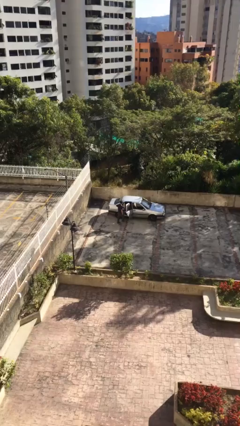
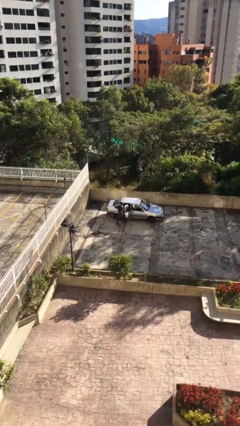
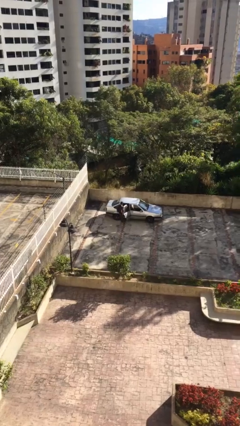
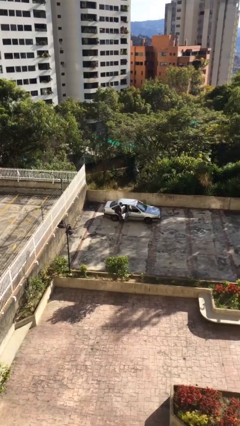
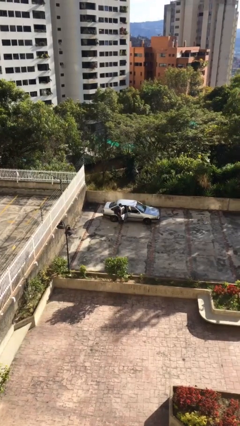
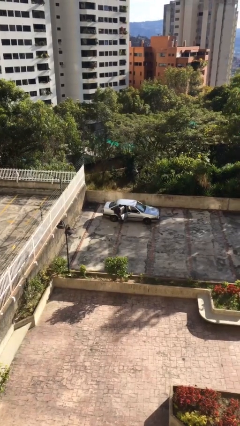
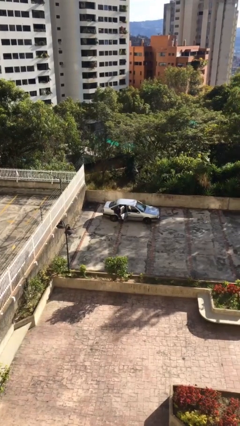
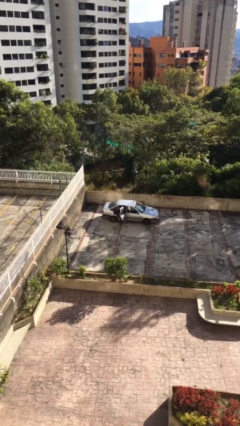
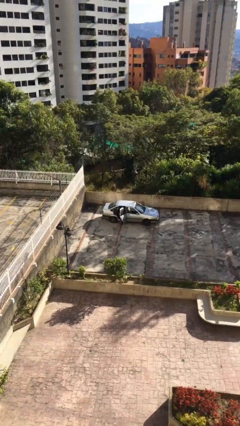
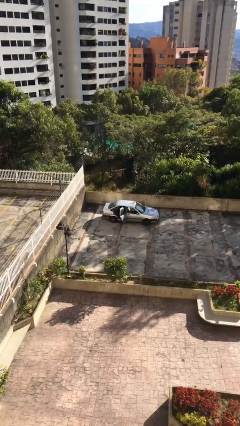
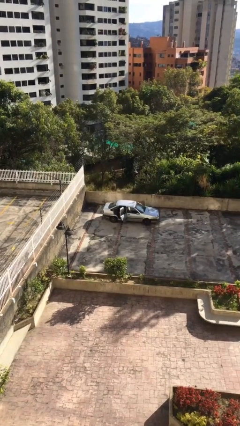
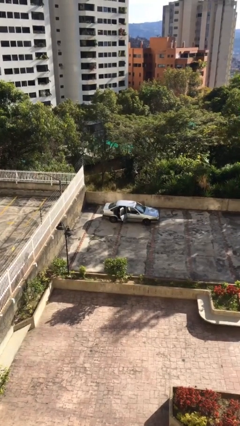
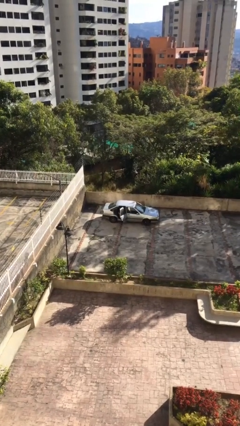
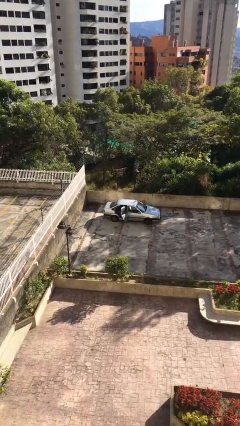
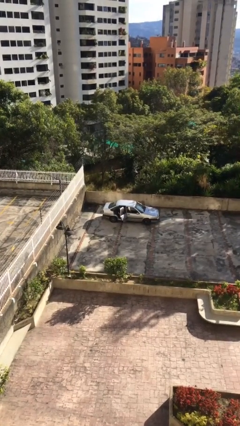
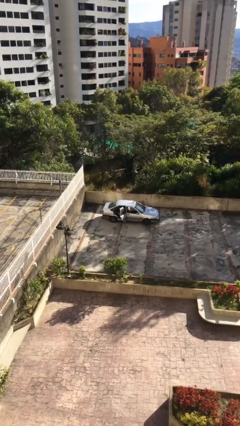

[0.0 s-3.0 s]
person enters car

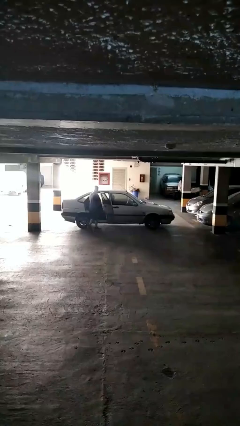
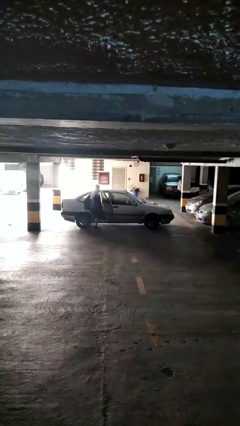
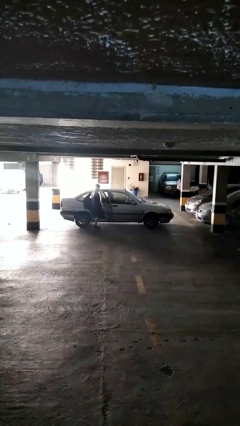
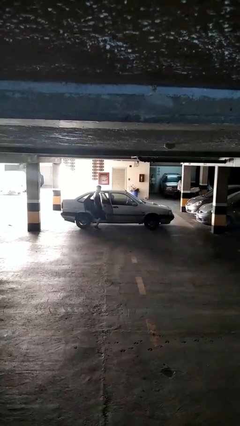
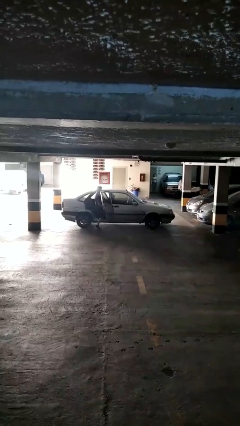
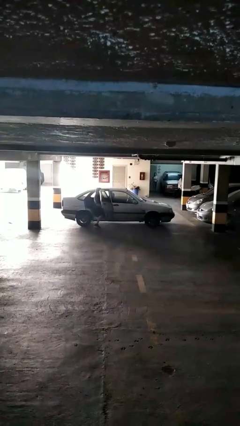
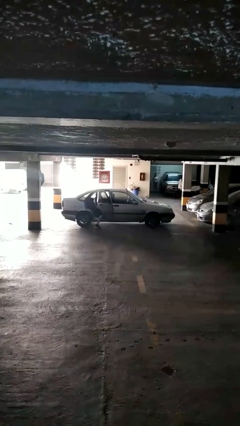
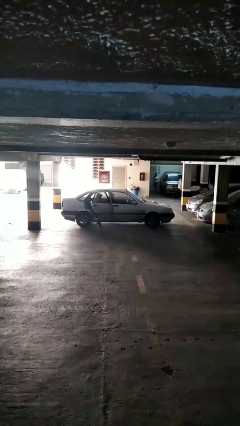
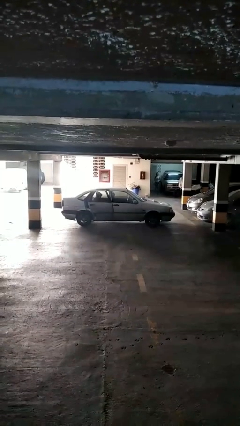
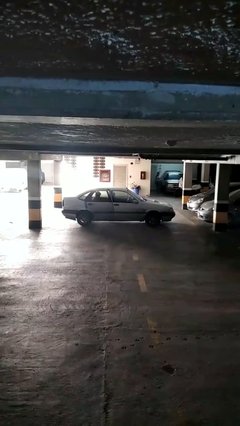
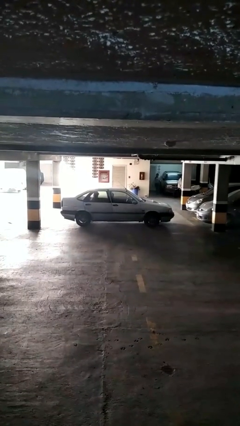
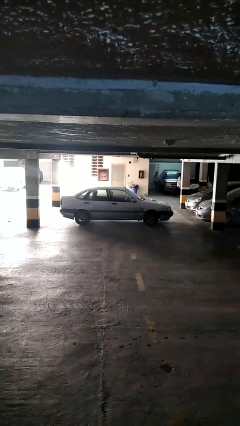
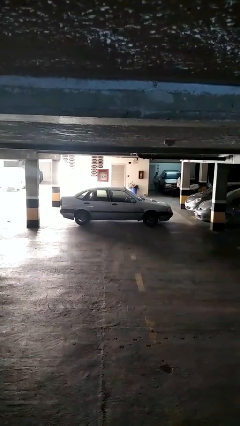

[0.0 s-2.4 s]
car picks up person

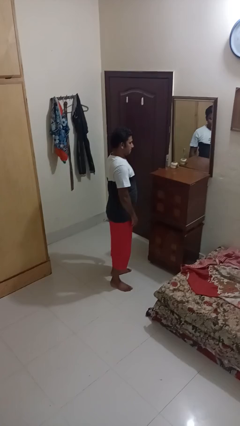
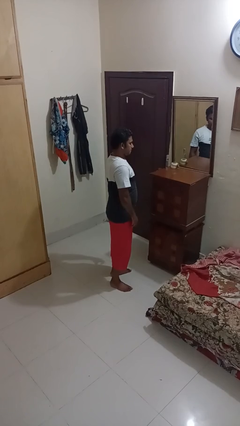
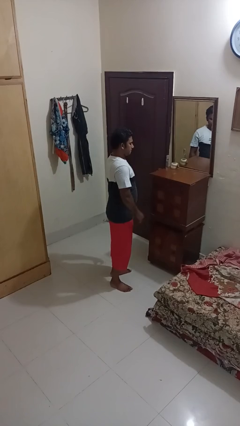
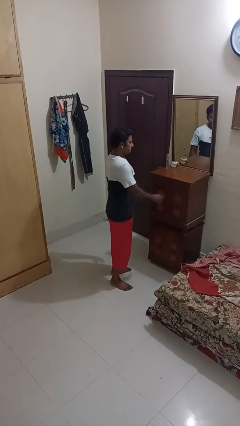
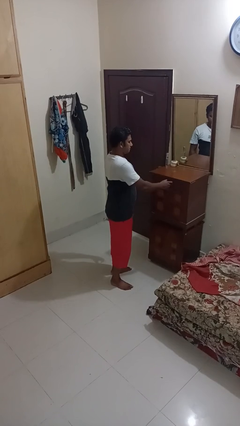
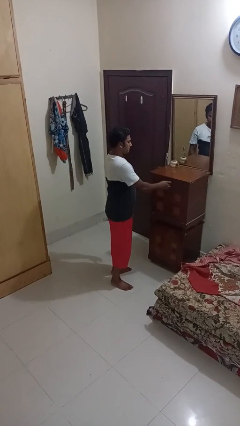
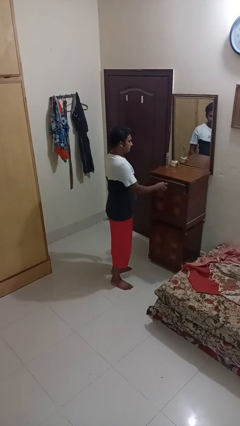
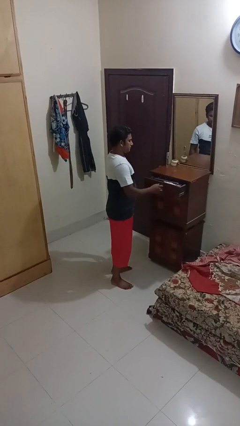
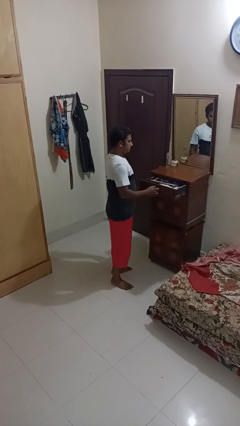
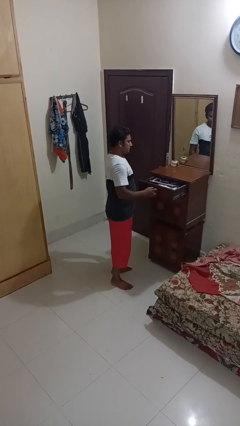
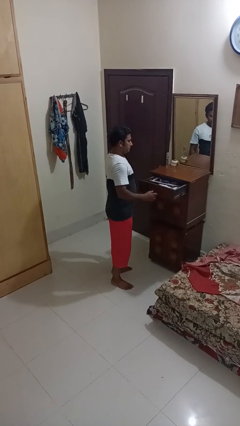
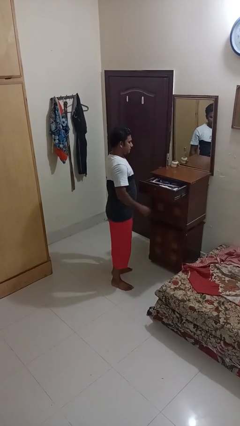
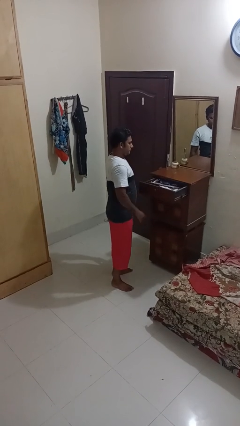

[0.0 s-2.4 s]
person opens dresser drawer

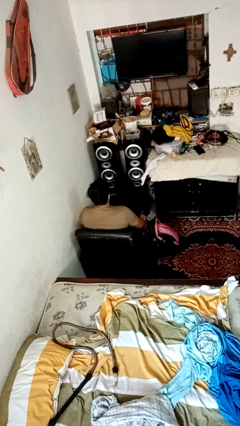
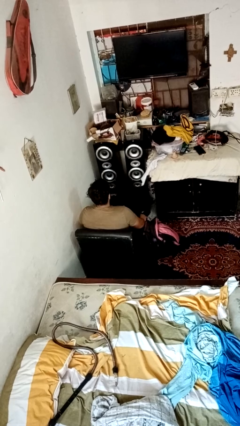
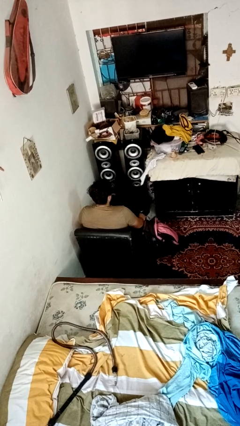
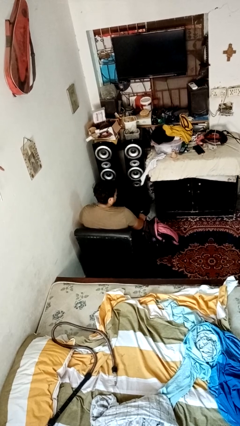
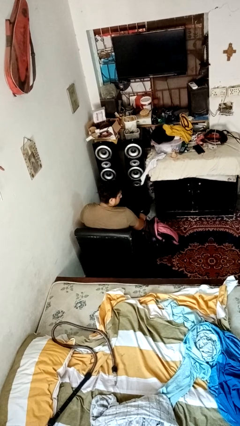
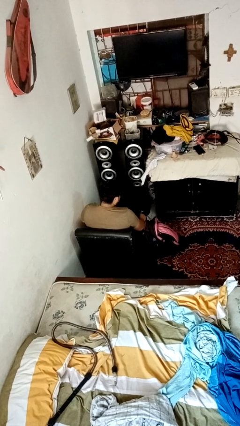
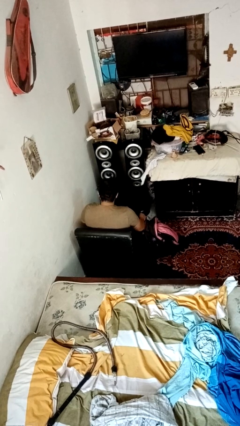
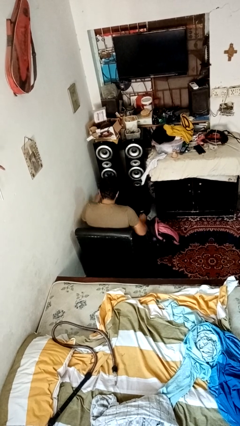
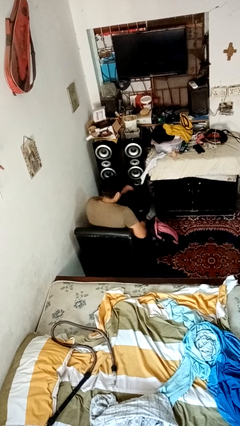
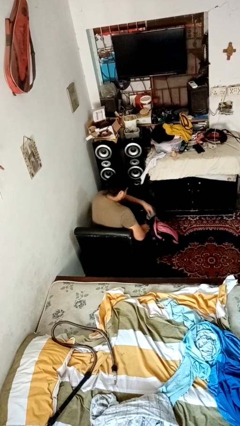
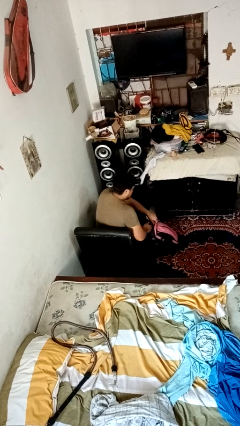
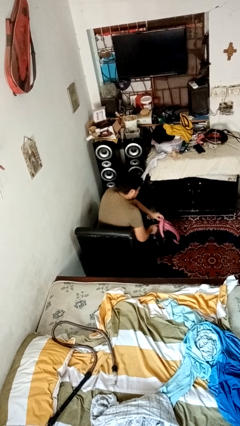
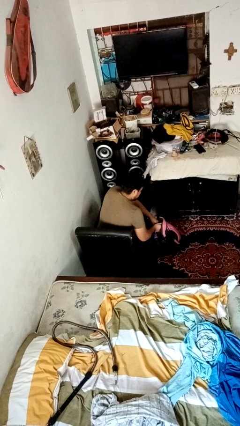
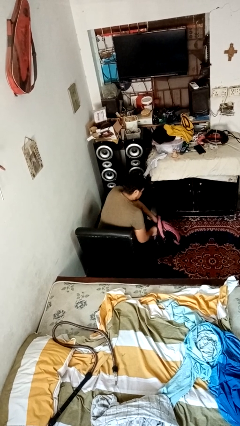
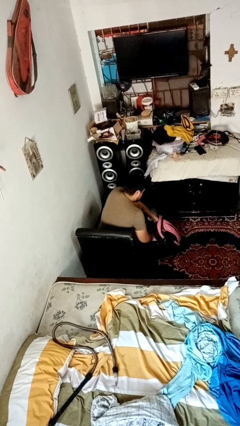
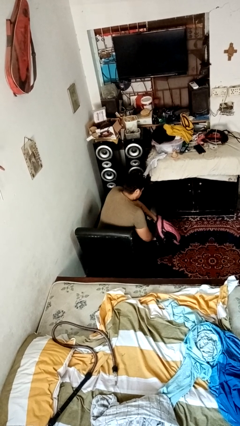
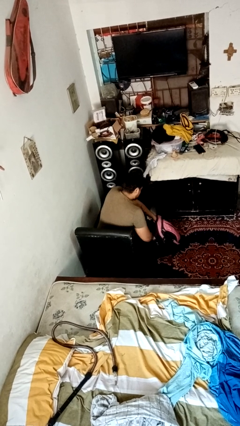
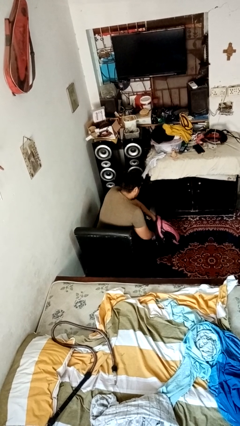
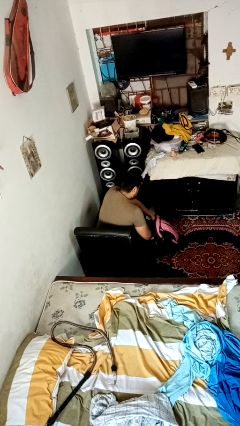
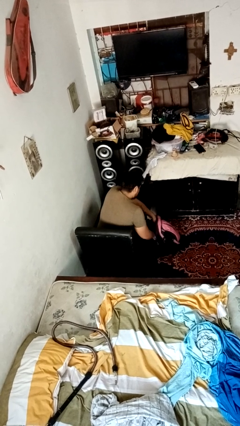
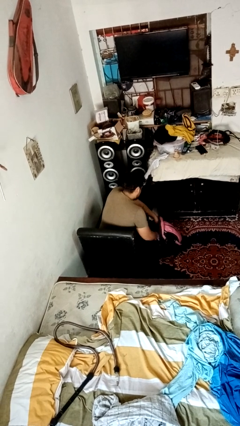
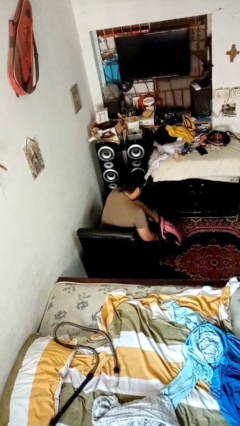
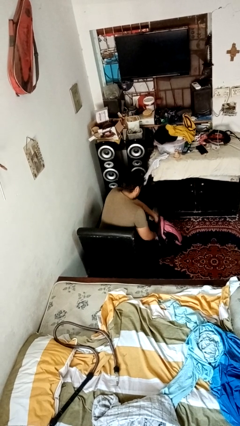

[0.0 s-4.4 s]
person searches in bag

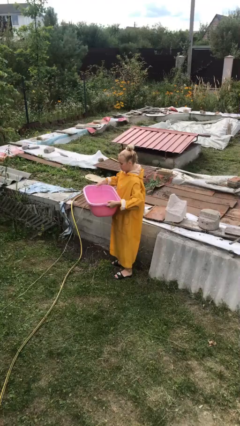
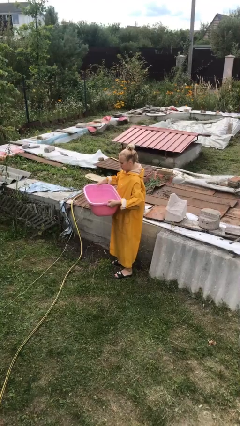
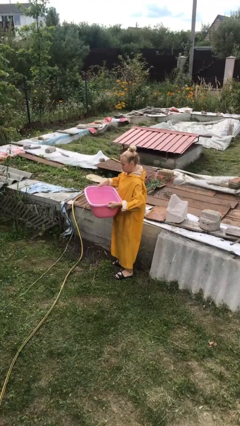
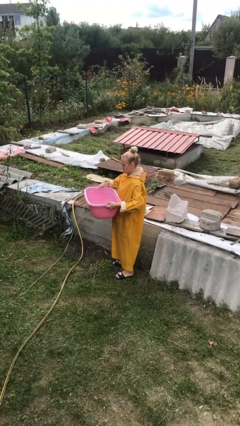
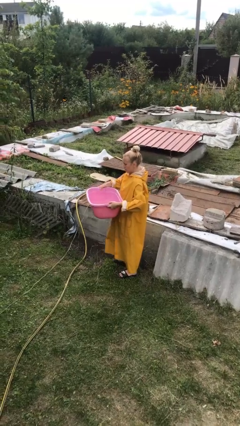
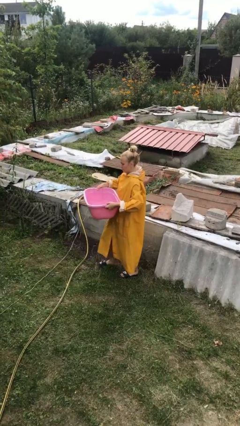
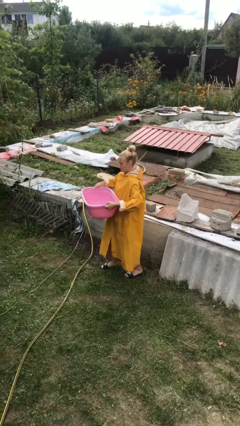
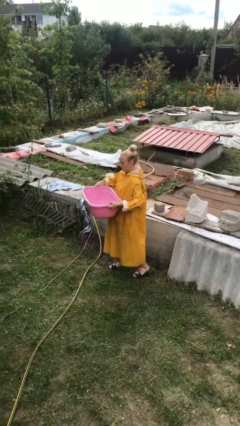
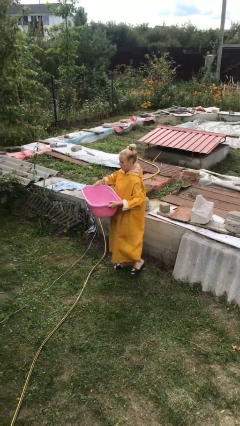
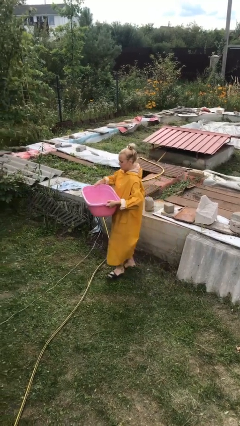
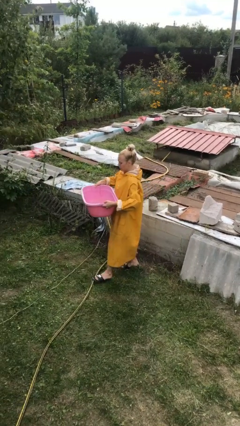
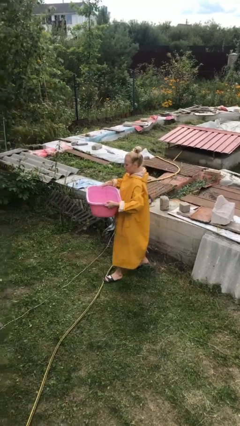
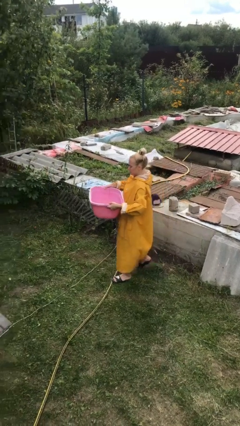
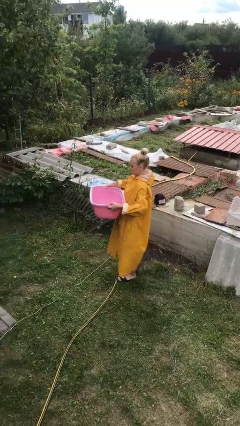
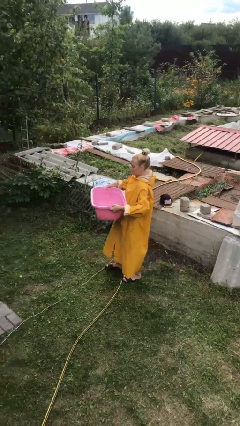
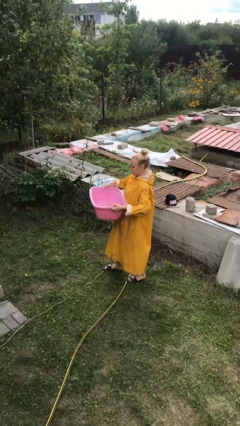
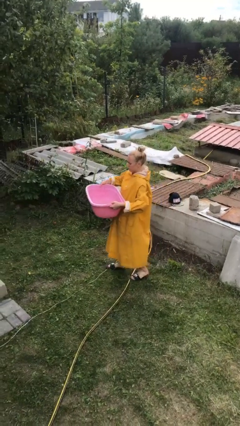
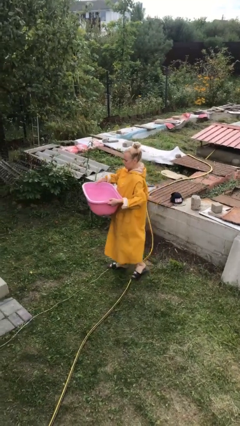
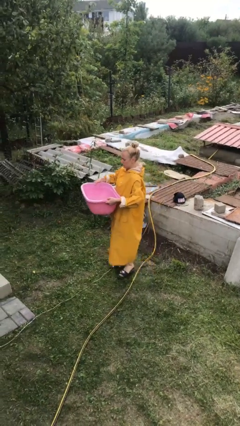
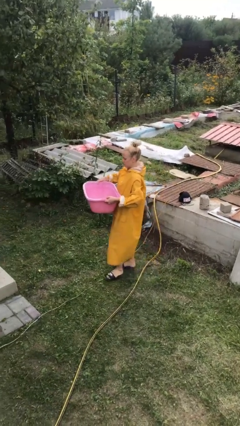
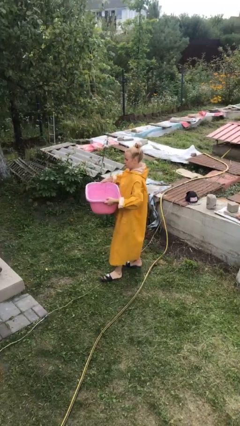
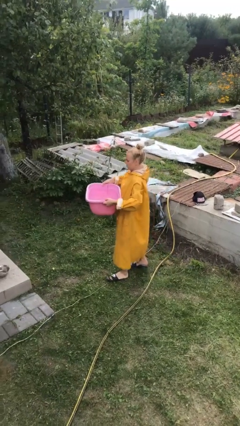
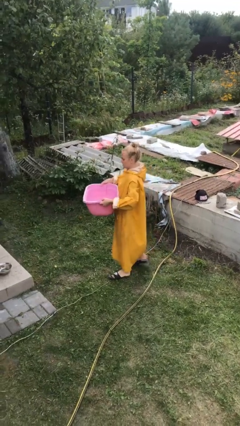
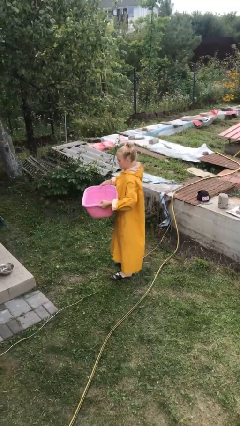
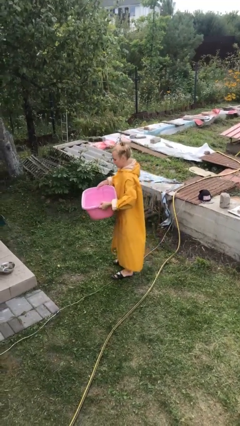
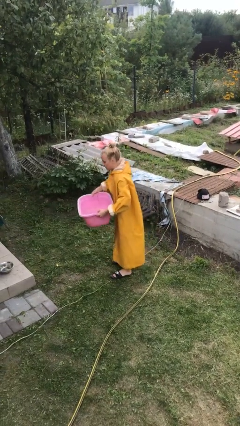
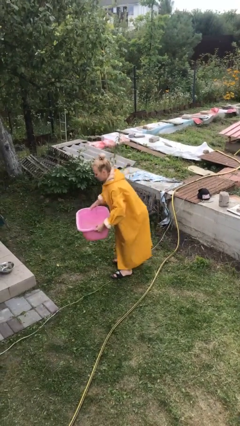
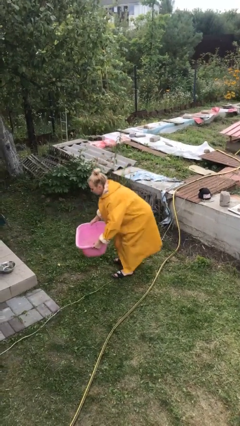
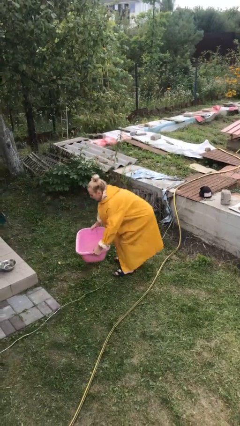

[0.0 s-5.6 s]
person carries heavy object
